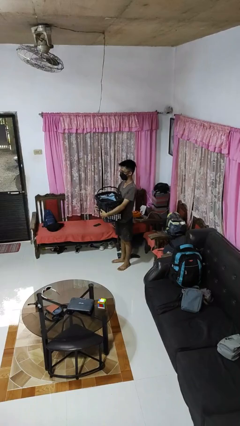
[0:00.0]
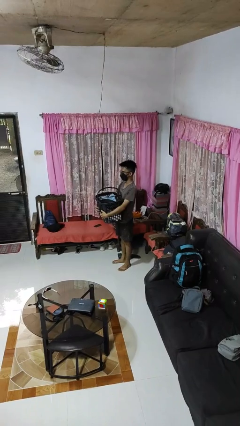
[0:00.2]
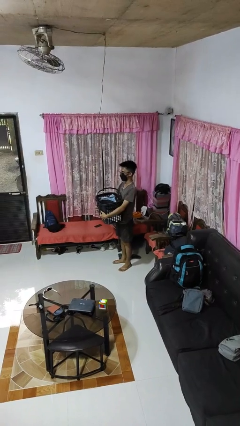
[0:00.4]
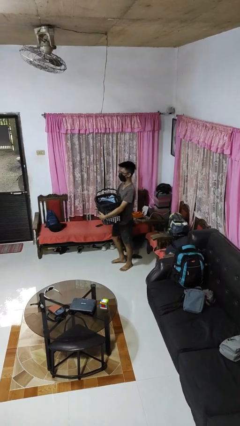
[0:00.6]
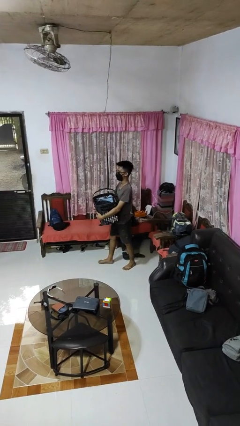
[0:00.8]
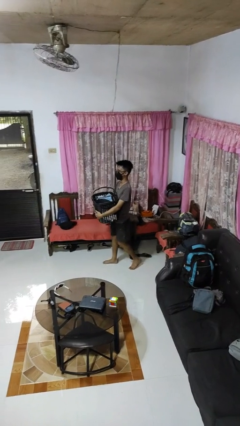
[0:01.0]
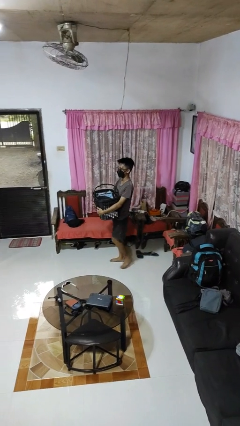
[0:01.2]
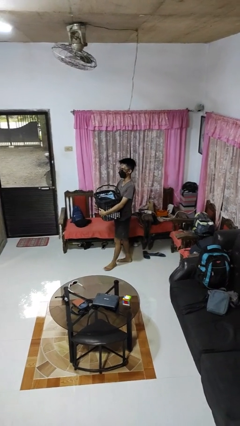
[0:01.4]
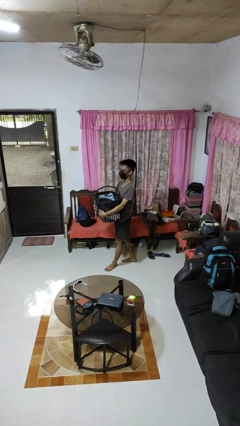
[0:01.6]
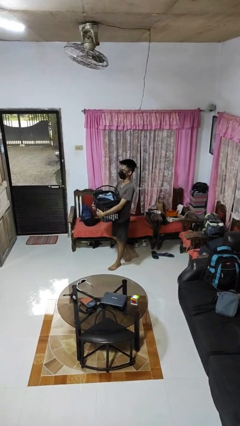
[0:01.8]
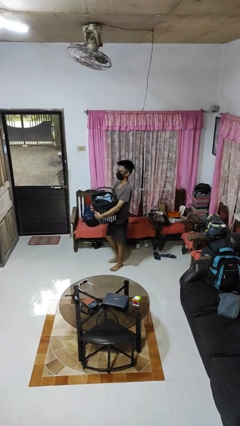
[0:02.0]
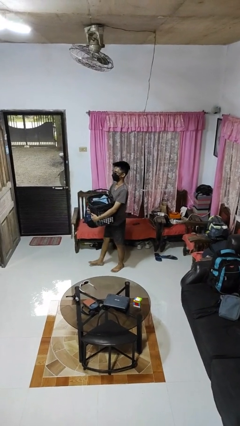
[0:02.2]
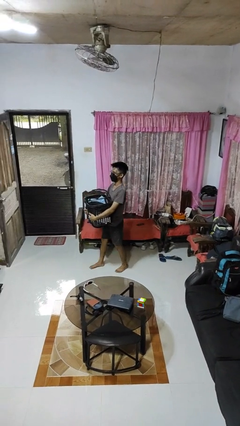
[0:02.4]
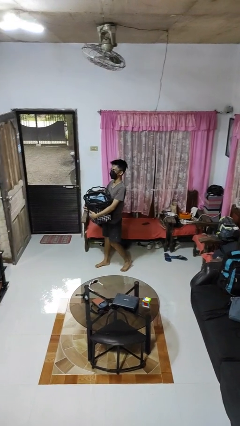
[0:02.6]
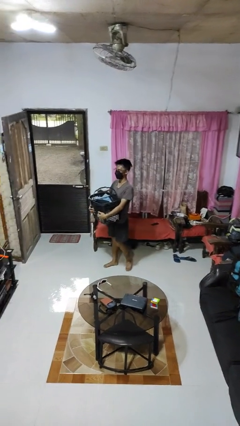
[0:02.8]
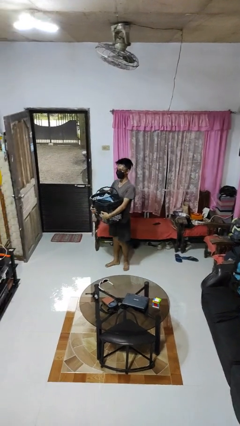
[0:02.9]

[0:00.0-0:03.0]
person carries laundry basket

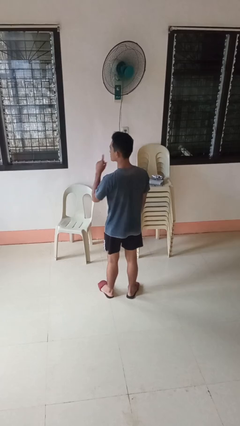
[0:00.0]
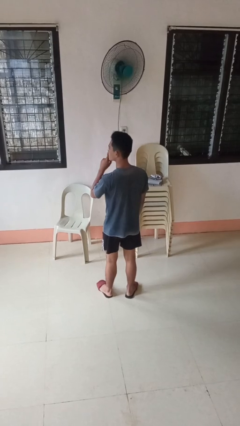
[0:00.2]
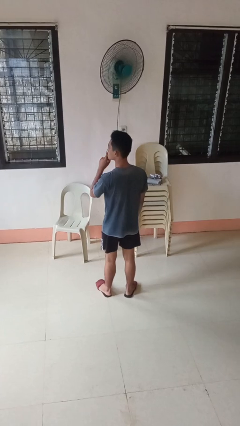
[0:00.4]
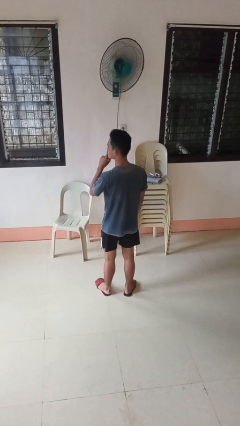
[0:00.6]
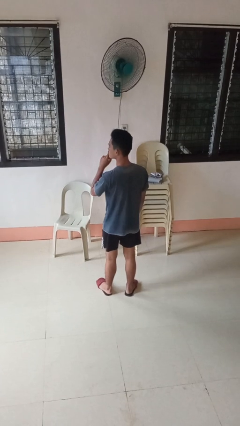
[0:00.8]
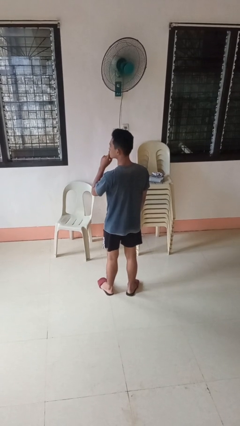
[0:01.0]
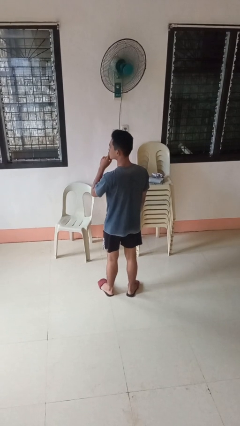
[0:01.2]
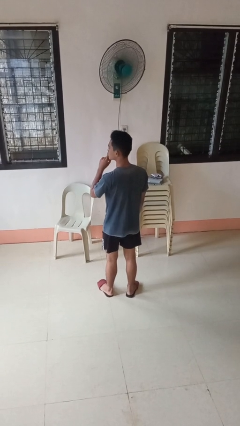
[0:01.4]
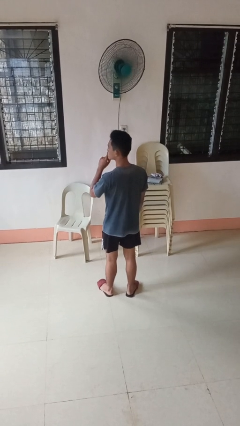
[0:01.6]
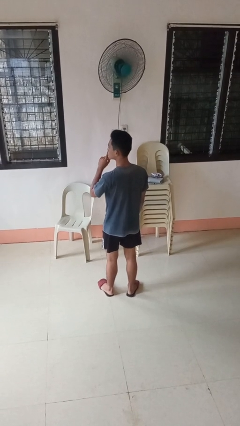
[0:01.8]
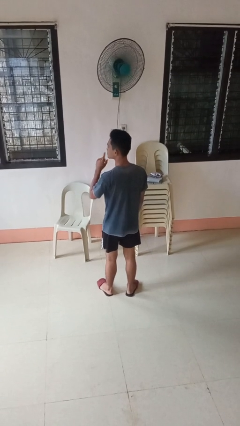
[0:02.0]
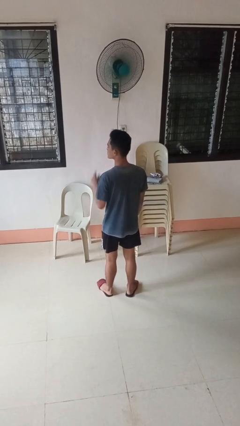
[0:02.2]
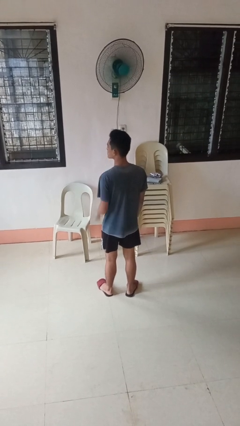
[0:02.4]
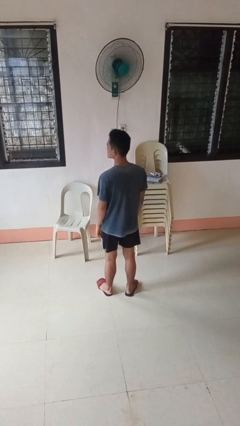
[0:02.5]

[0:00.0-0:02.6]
person gestures be quiet

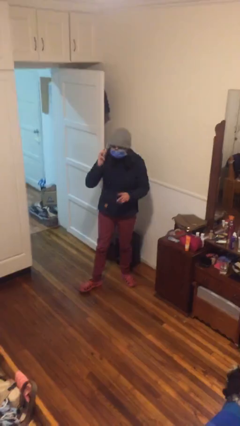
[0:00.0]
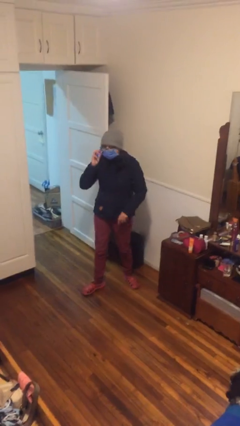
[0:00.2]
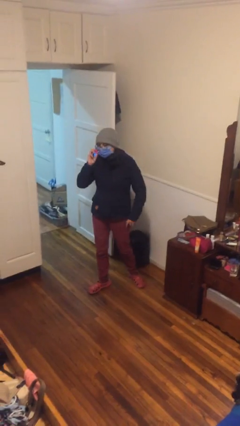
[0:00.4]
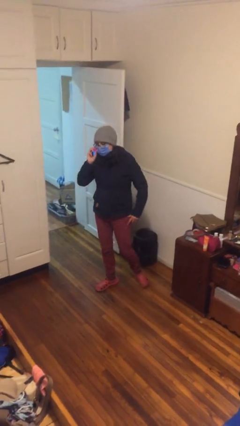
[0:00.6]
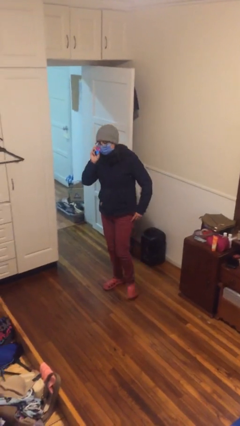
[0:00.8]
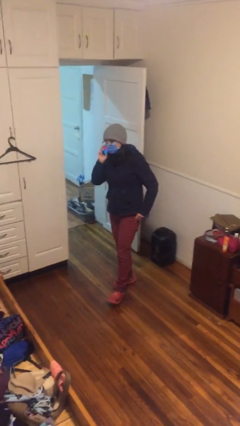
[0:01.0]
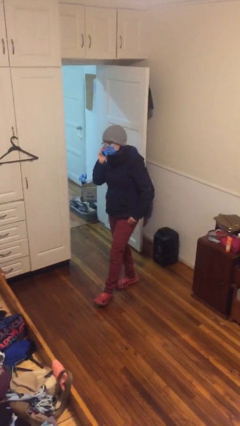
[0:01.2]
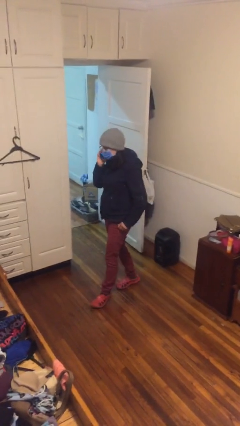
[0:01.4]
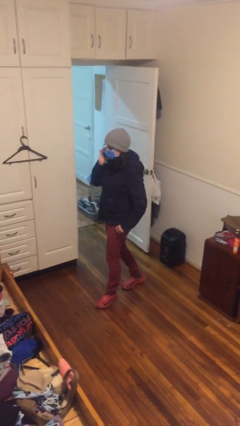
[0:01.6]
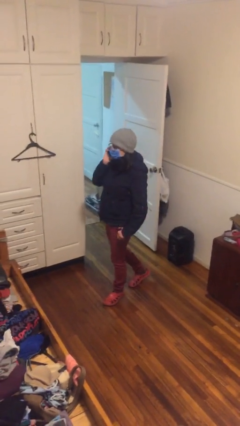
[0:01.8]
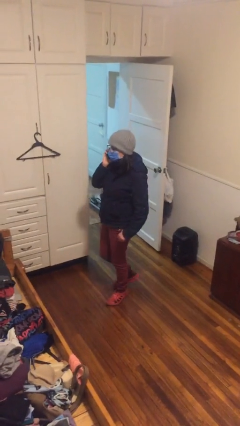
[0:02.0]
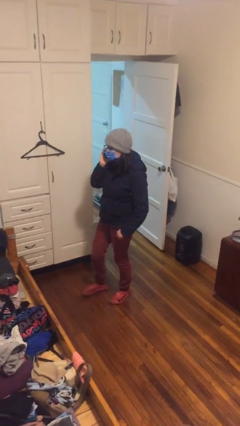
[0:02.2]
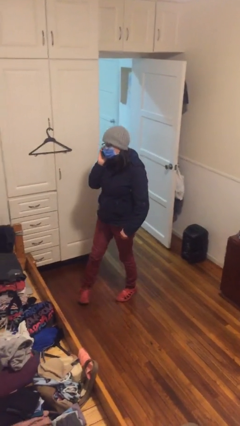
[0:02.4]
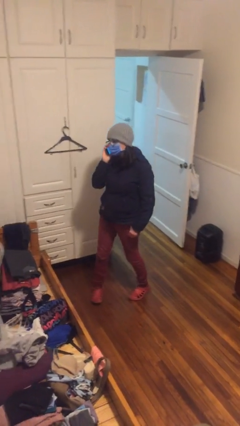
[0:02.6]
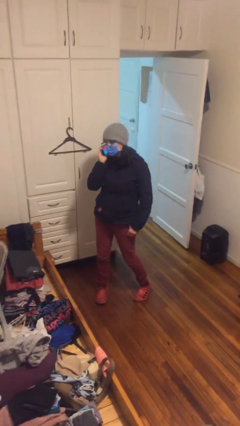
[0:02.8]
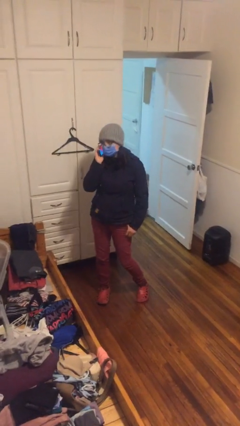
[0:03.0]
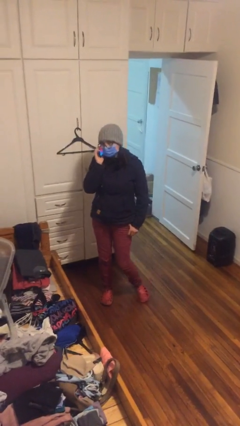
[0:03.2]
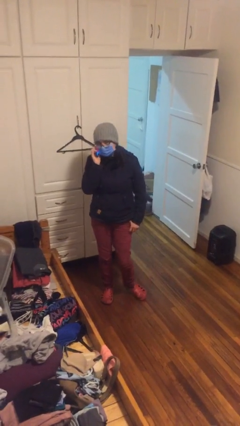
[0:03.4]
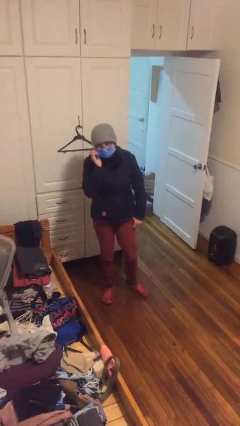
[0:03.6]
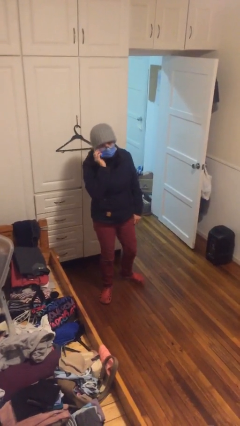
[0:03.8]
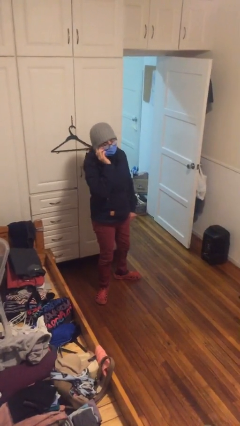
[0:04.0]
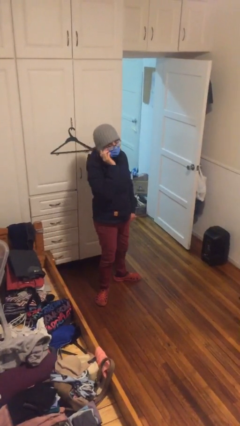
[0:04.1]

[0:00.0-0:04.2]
person talks on phone

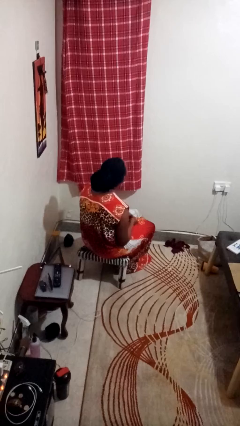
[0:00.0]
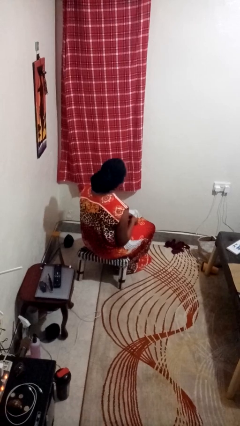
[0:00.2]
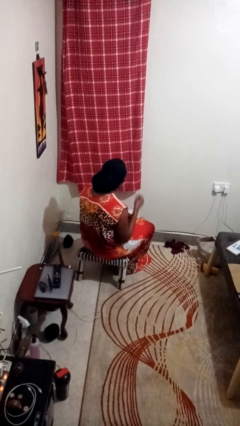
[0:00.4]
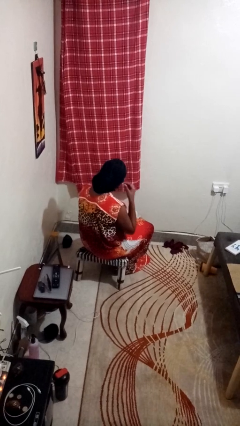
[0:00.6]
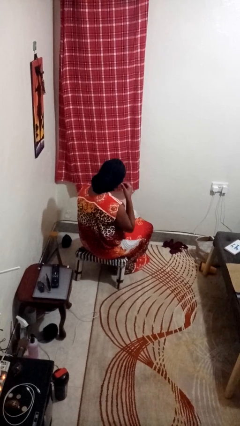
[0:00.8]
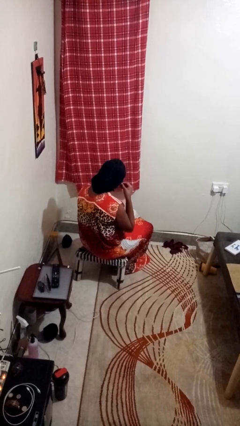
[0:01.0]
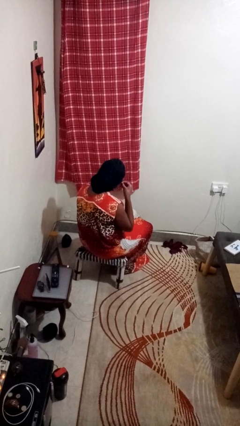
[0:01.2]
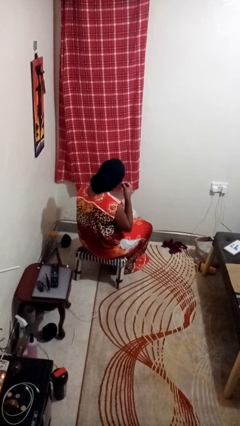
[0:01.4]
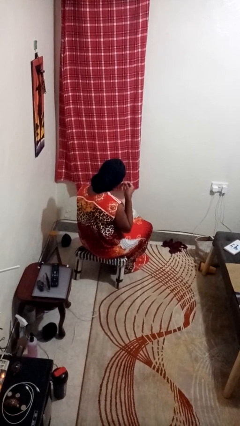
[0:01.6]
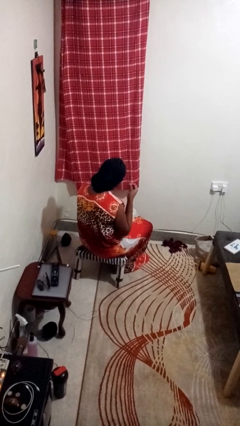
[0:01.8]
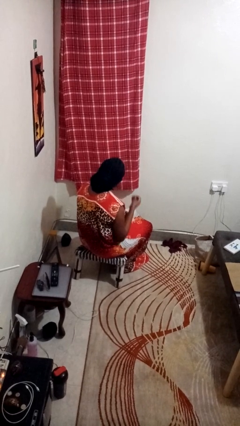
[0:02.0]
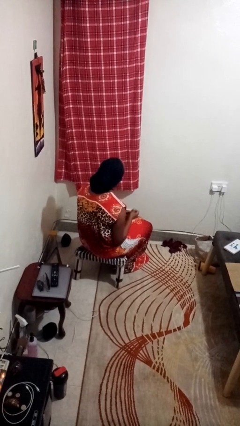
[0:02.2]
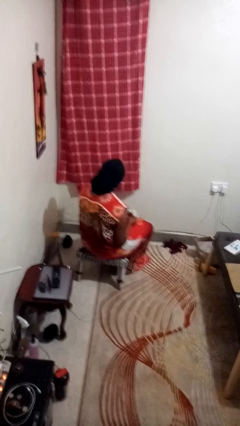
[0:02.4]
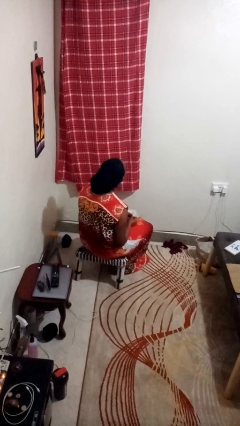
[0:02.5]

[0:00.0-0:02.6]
person takes off earrings

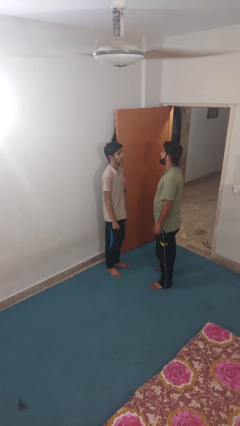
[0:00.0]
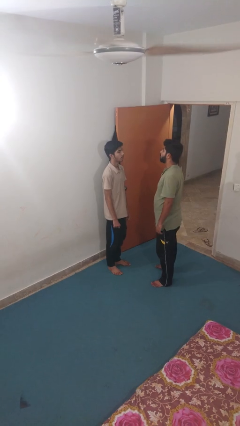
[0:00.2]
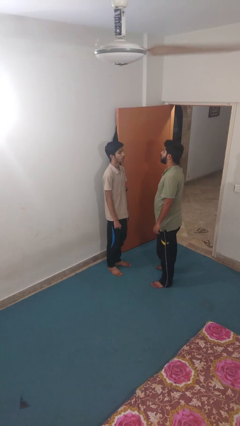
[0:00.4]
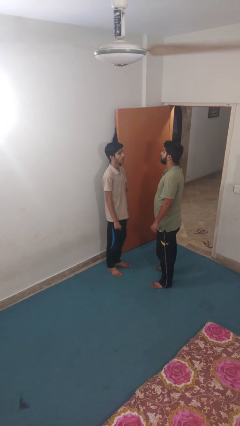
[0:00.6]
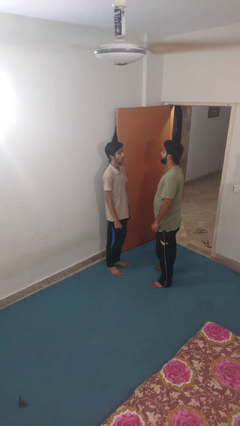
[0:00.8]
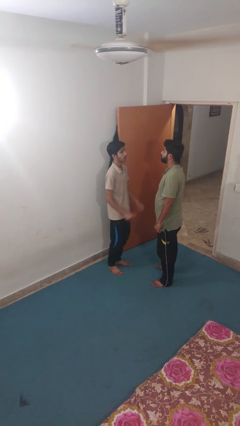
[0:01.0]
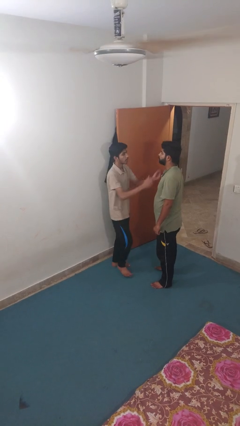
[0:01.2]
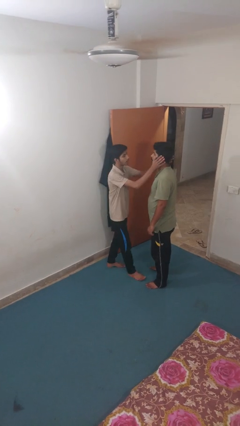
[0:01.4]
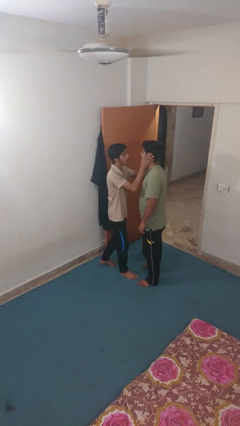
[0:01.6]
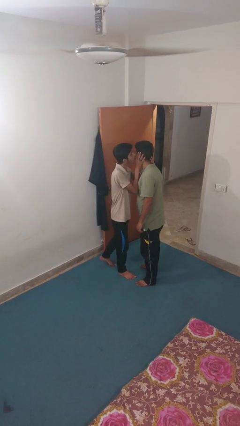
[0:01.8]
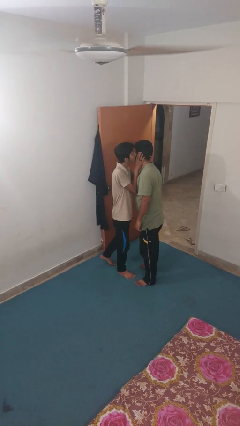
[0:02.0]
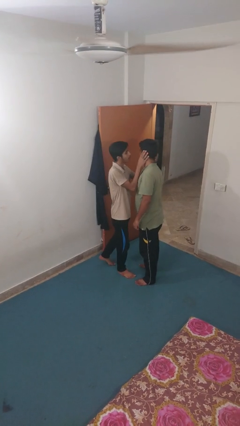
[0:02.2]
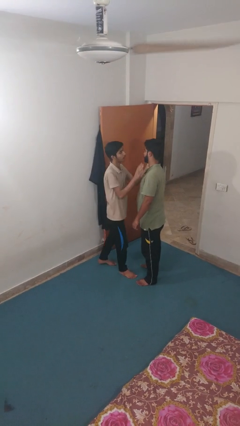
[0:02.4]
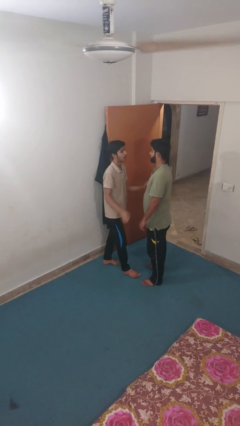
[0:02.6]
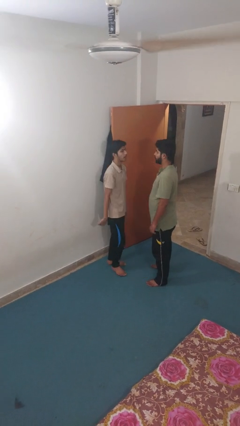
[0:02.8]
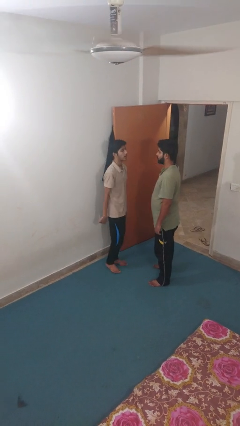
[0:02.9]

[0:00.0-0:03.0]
person kisses cheek of person

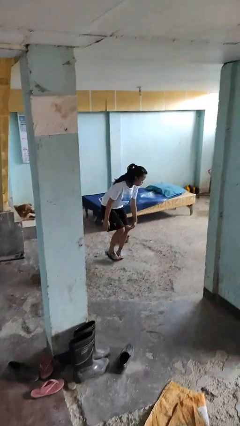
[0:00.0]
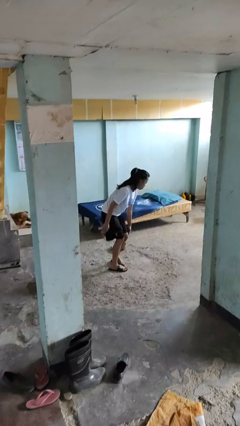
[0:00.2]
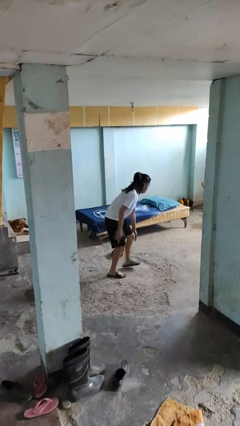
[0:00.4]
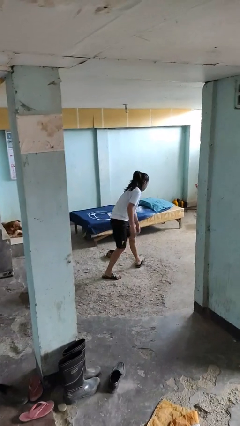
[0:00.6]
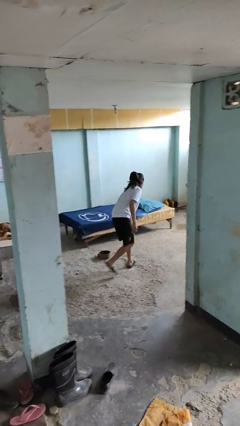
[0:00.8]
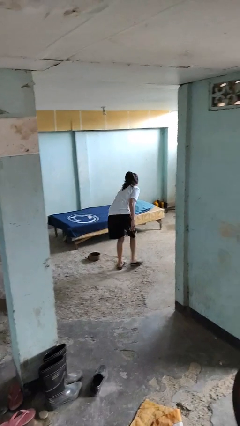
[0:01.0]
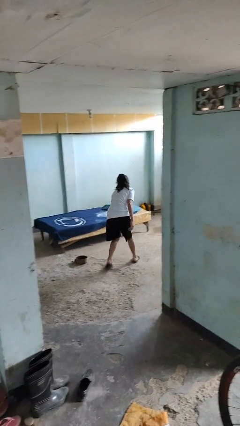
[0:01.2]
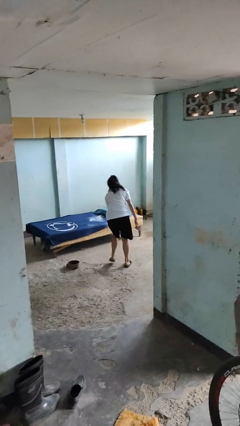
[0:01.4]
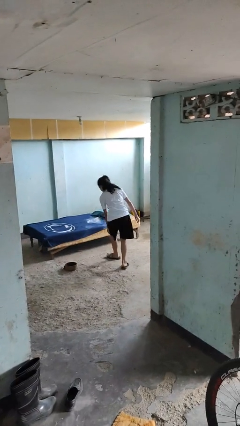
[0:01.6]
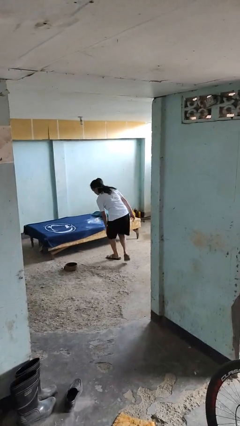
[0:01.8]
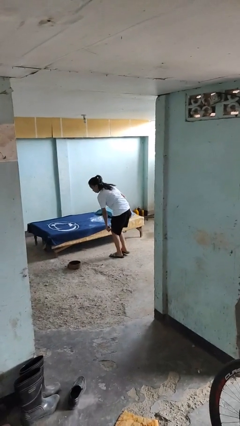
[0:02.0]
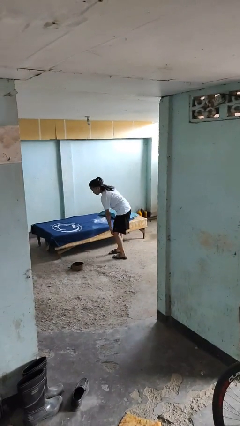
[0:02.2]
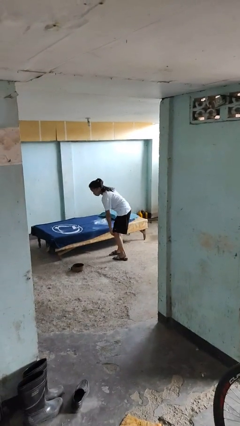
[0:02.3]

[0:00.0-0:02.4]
person stands up from floor
